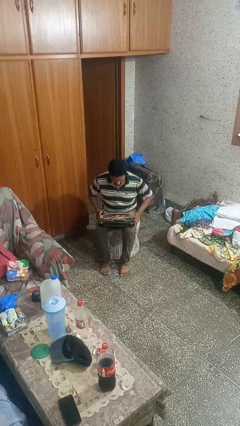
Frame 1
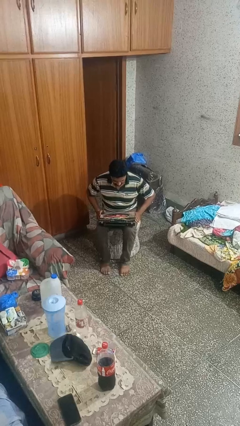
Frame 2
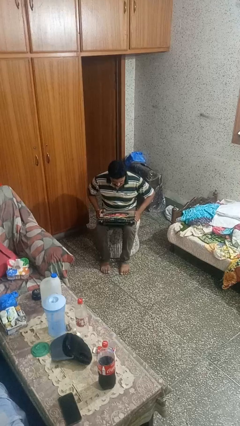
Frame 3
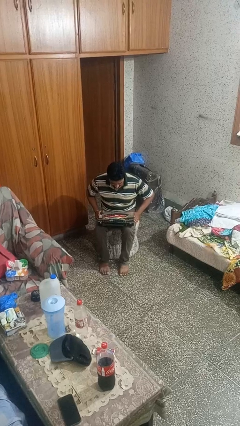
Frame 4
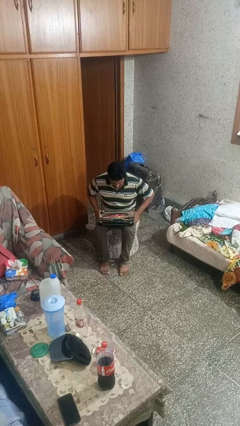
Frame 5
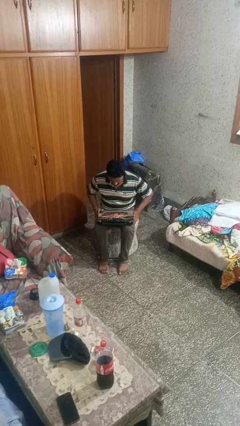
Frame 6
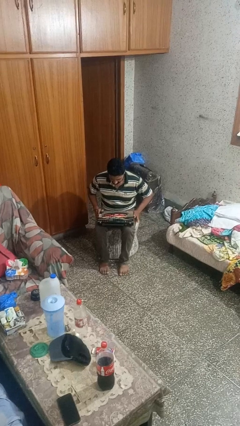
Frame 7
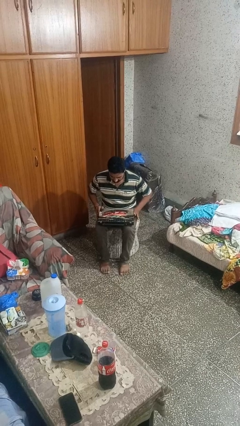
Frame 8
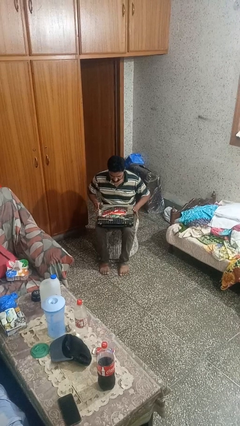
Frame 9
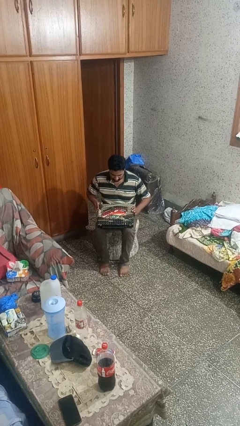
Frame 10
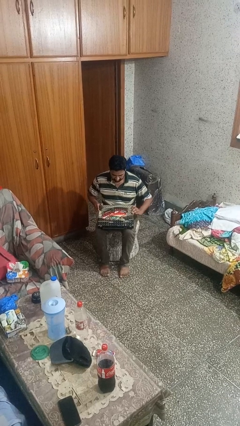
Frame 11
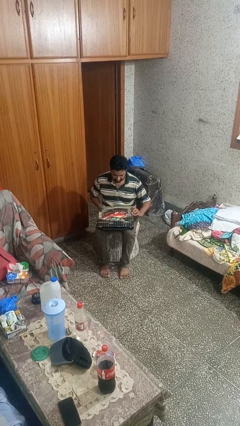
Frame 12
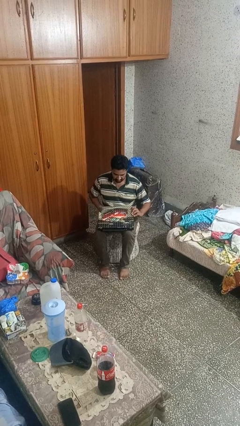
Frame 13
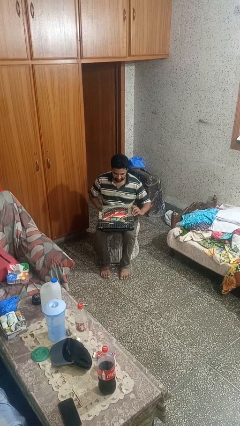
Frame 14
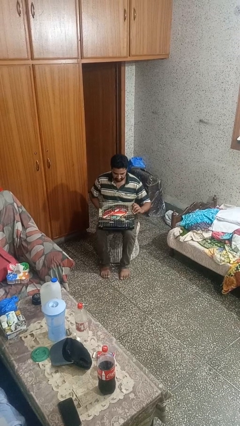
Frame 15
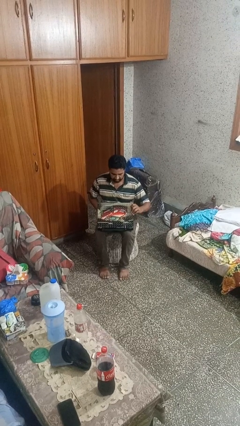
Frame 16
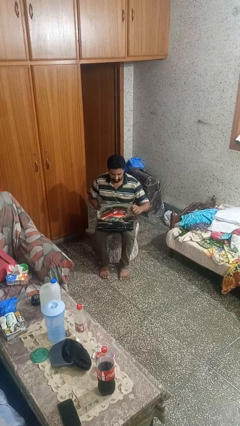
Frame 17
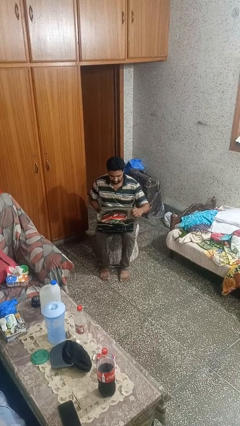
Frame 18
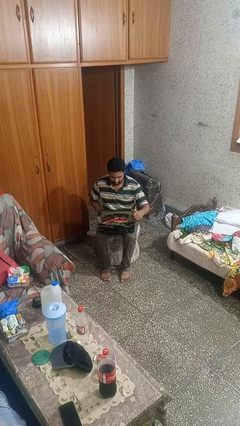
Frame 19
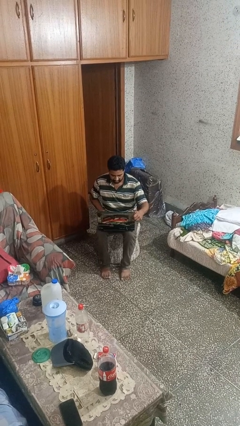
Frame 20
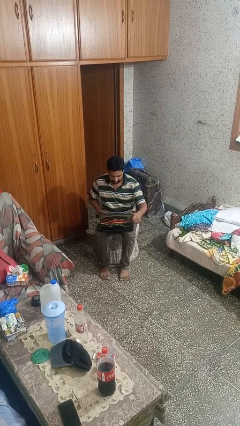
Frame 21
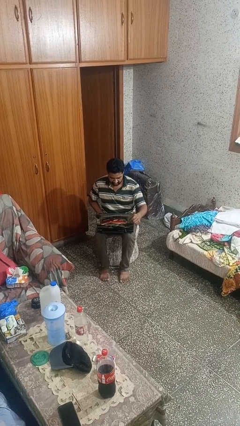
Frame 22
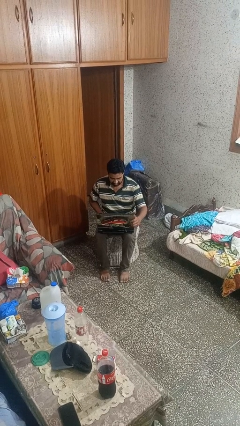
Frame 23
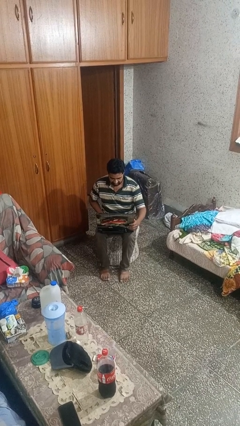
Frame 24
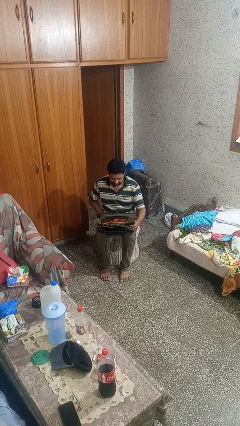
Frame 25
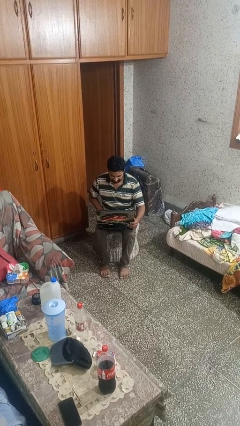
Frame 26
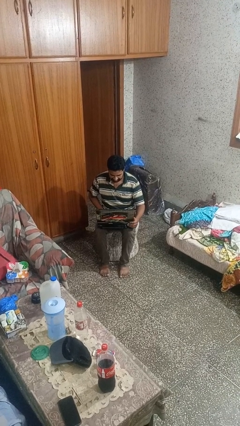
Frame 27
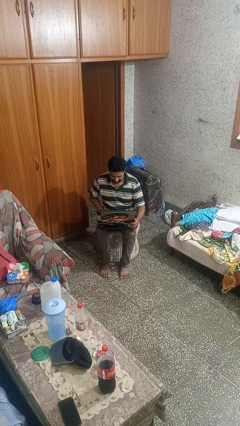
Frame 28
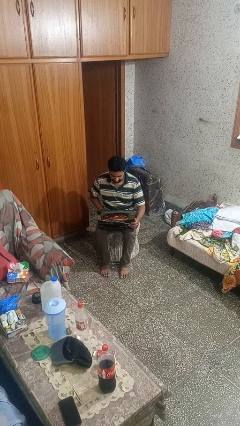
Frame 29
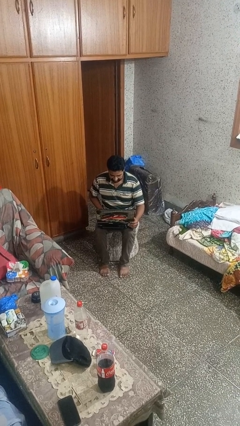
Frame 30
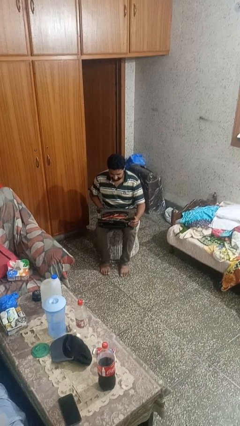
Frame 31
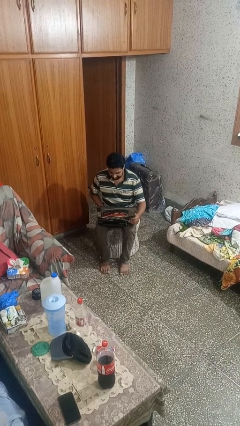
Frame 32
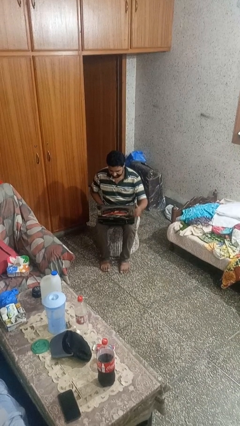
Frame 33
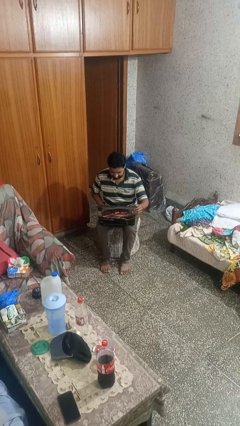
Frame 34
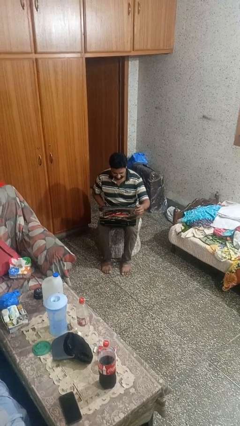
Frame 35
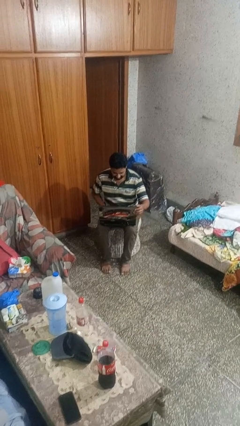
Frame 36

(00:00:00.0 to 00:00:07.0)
person opens laptop

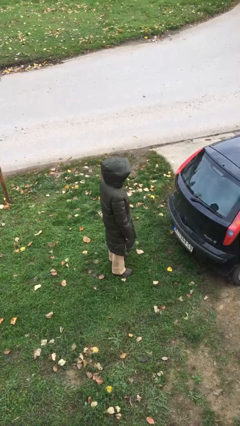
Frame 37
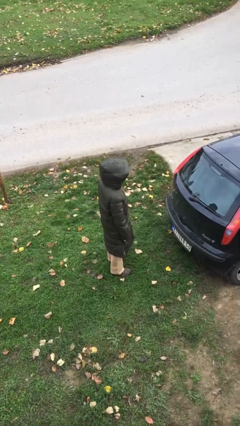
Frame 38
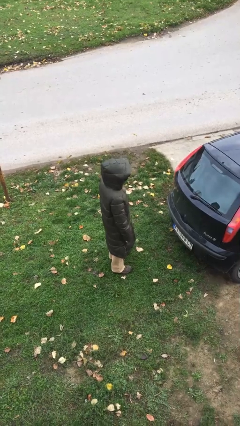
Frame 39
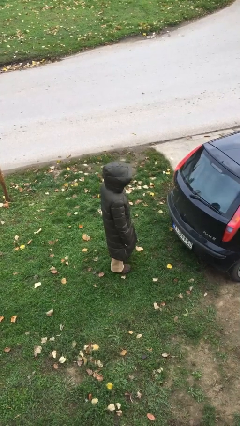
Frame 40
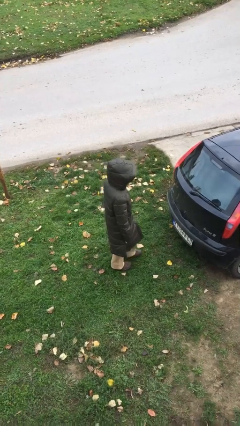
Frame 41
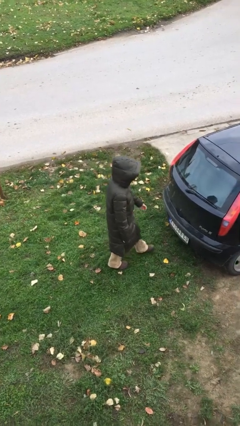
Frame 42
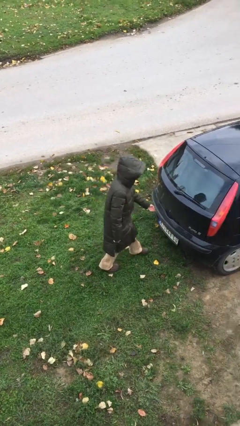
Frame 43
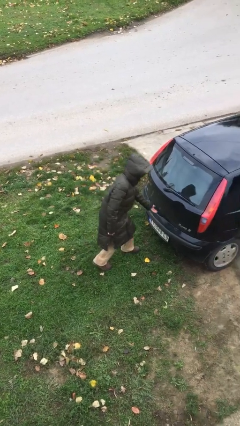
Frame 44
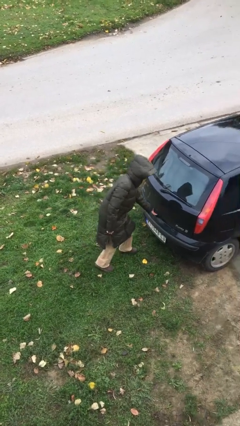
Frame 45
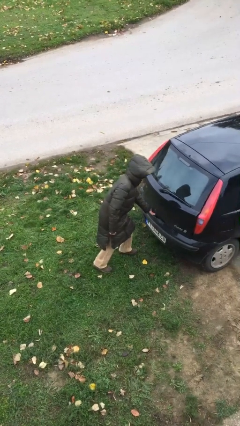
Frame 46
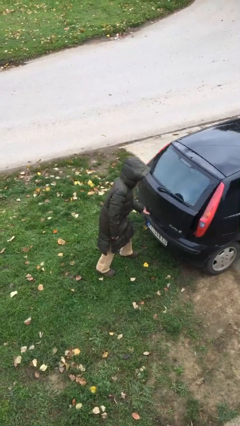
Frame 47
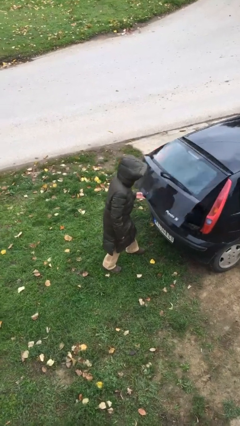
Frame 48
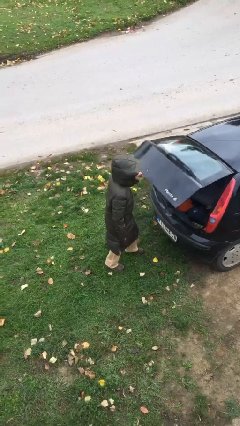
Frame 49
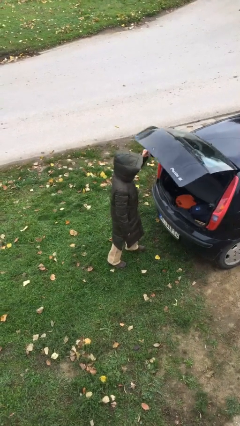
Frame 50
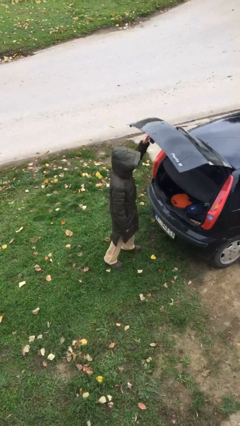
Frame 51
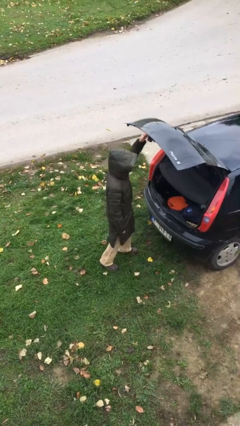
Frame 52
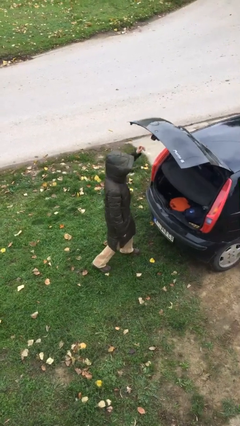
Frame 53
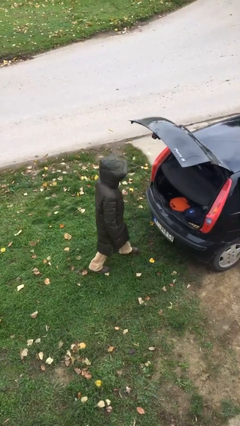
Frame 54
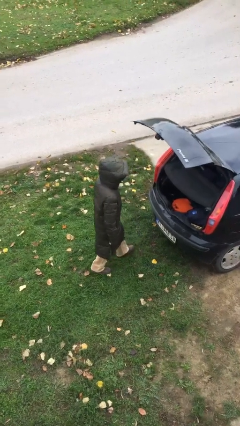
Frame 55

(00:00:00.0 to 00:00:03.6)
person opens car trunk

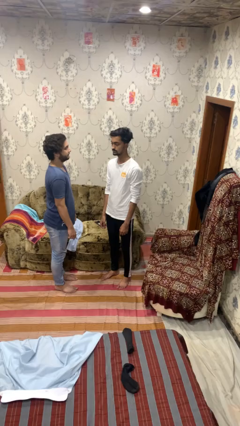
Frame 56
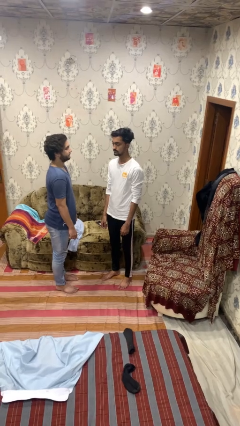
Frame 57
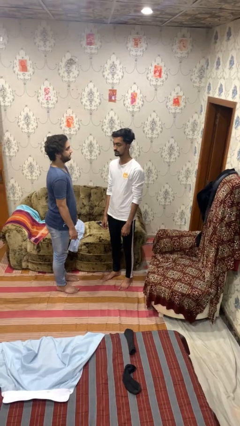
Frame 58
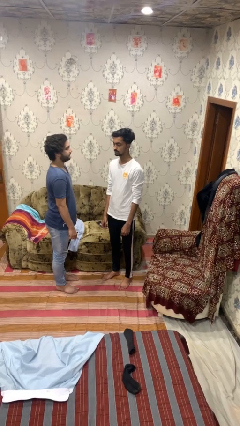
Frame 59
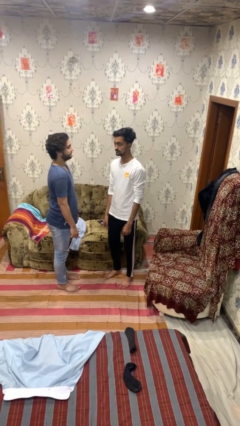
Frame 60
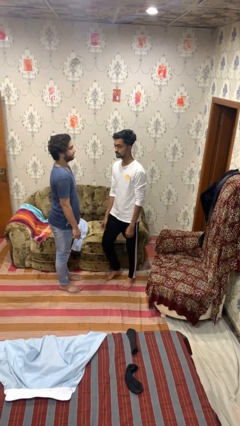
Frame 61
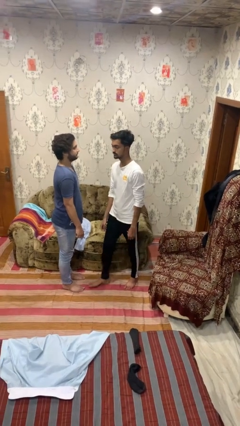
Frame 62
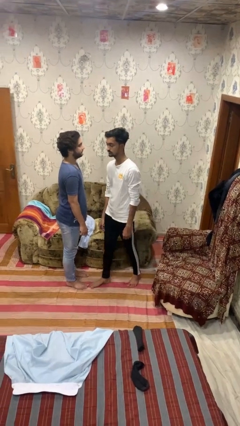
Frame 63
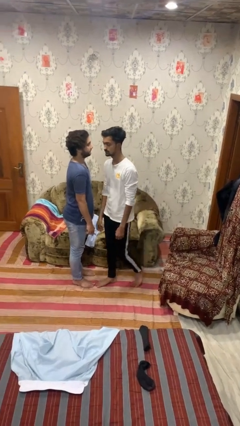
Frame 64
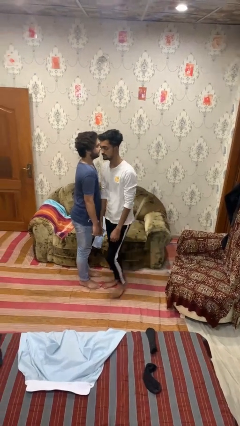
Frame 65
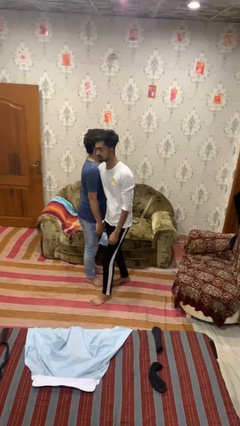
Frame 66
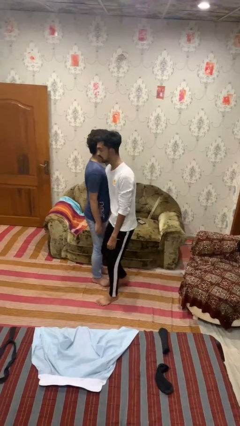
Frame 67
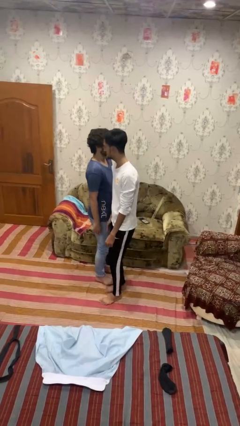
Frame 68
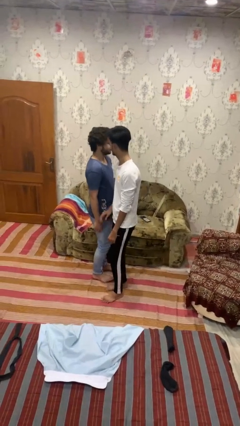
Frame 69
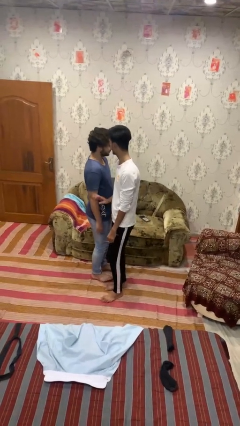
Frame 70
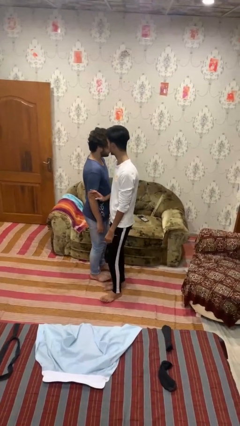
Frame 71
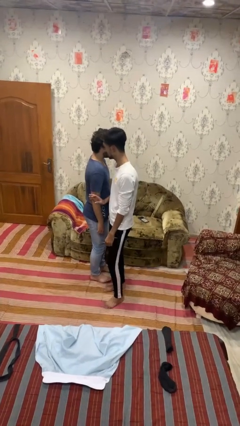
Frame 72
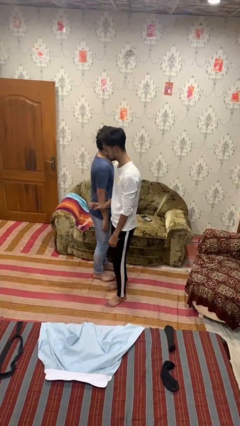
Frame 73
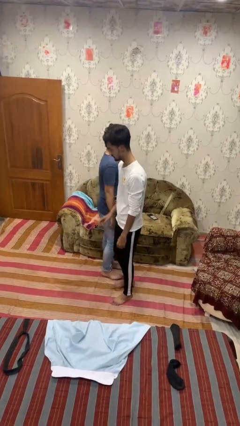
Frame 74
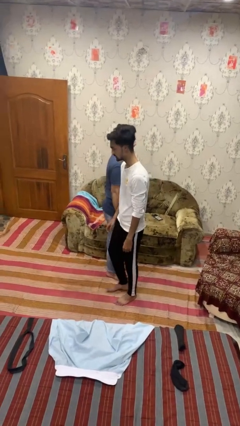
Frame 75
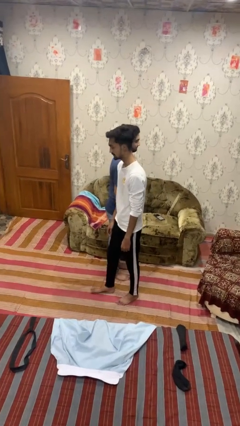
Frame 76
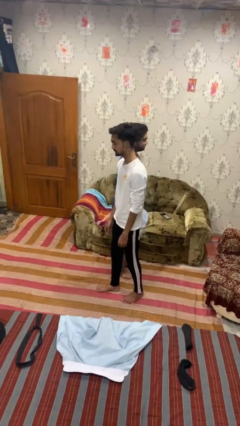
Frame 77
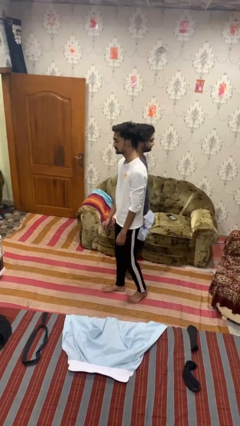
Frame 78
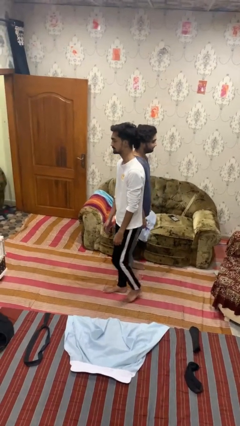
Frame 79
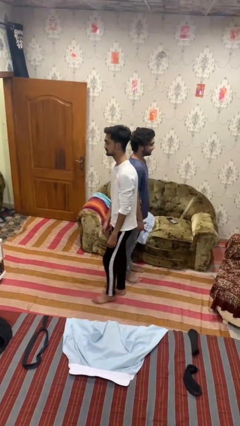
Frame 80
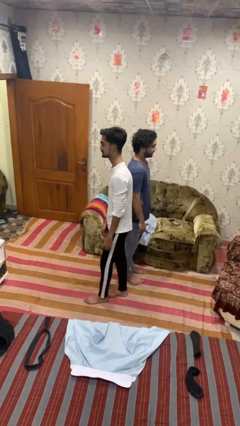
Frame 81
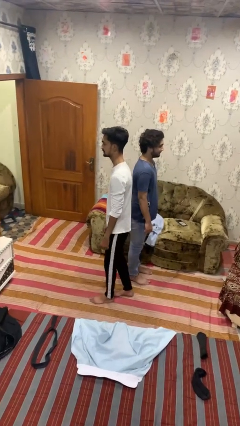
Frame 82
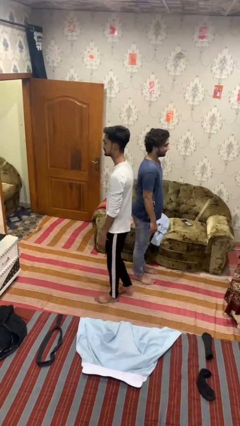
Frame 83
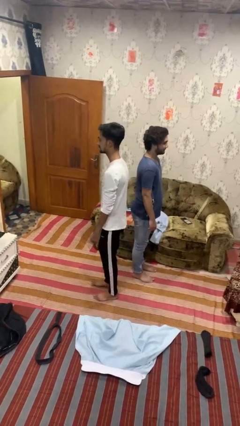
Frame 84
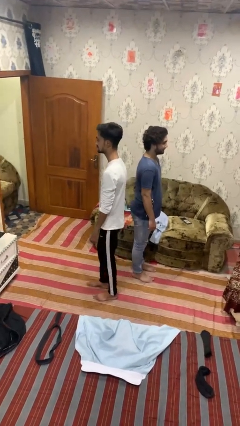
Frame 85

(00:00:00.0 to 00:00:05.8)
person bumps into person

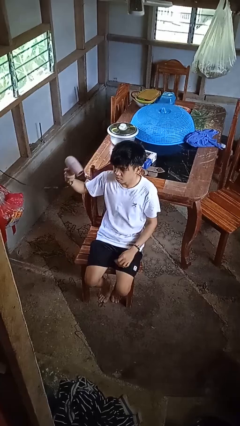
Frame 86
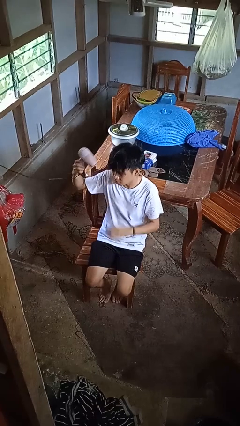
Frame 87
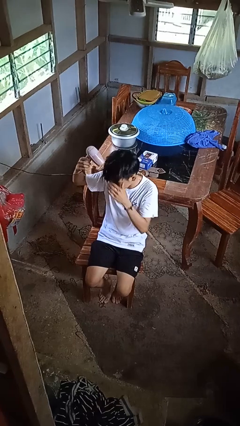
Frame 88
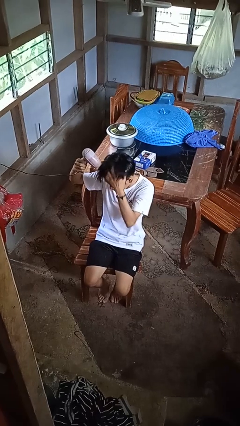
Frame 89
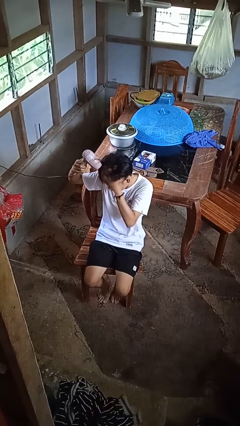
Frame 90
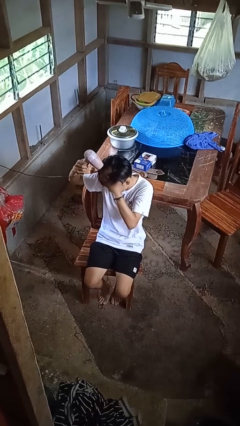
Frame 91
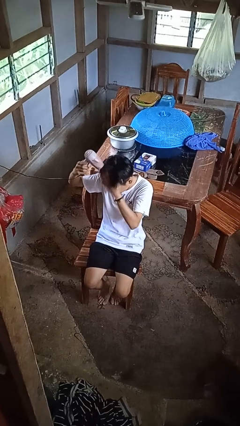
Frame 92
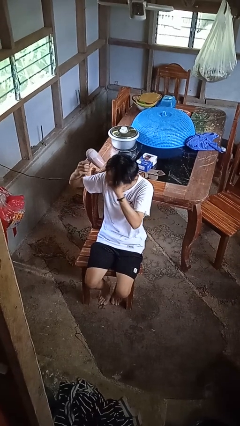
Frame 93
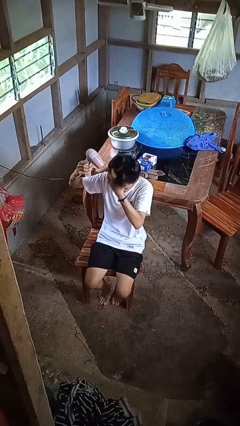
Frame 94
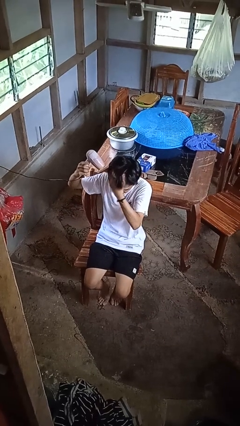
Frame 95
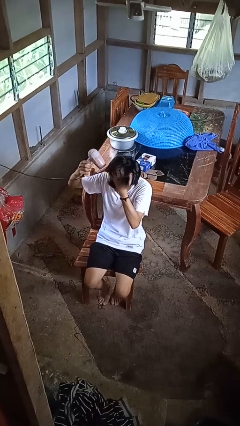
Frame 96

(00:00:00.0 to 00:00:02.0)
person dries hair with hairdryer
